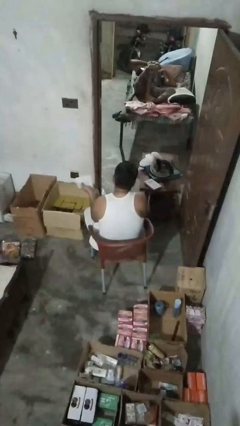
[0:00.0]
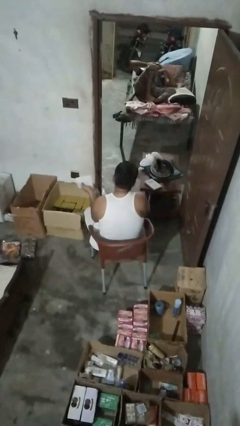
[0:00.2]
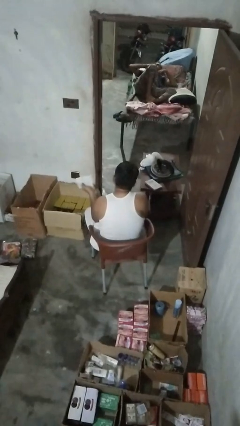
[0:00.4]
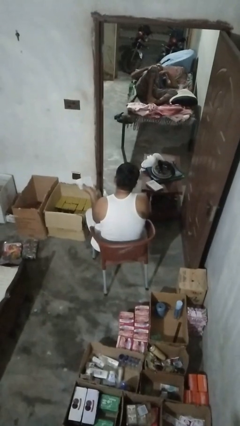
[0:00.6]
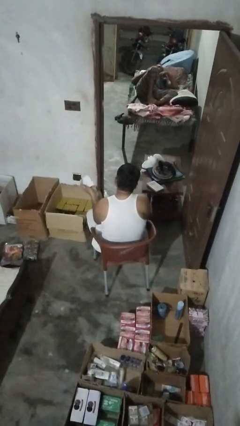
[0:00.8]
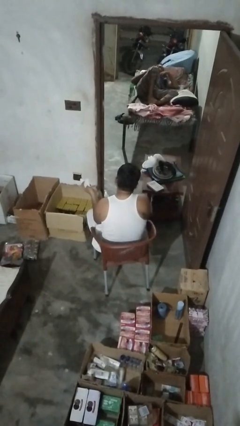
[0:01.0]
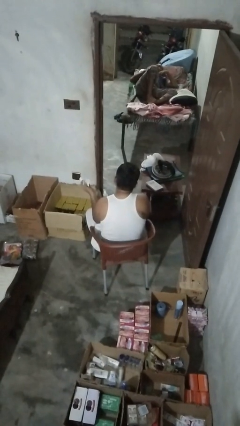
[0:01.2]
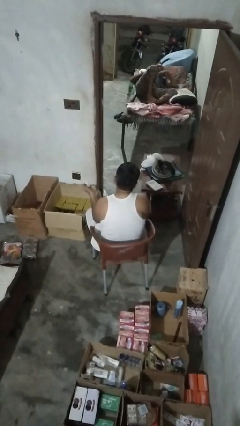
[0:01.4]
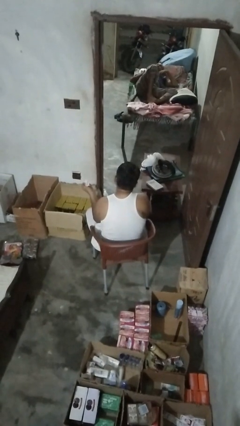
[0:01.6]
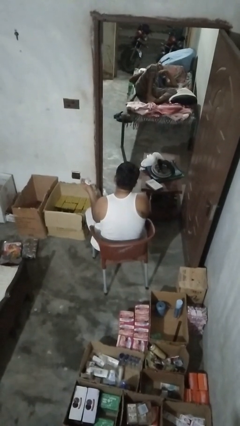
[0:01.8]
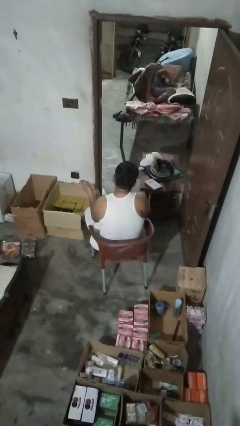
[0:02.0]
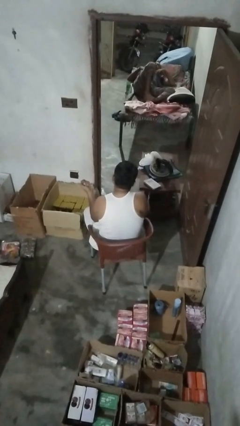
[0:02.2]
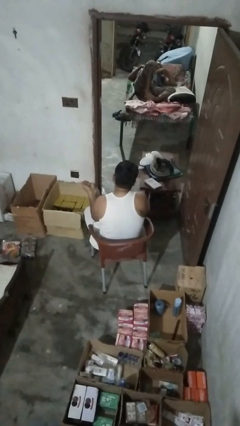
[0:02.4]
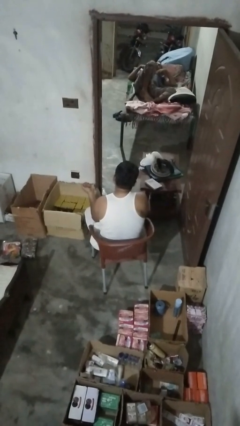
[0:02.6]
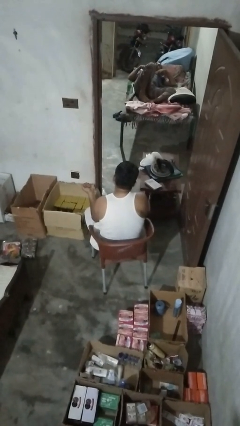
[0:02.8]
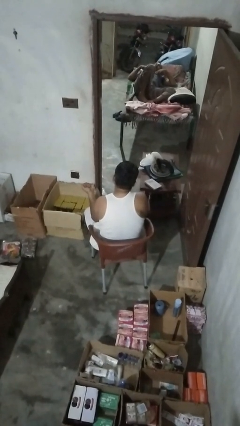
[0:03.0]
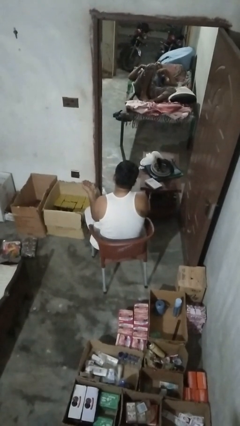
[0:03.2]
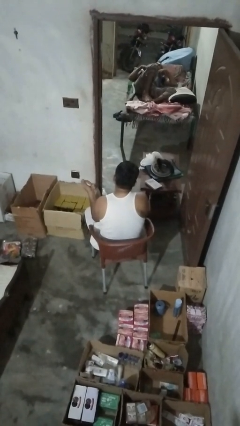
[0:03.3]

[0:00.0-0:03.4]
person crumples paper

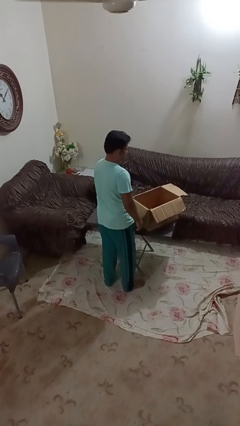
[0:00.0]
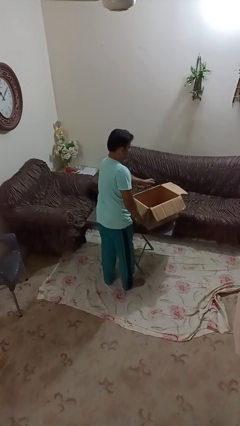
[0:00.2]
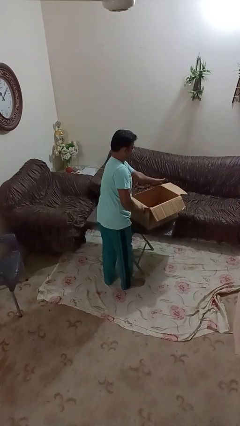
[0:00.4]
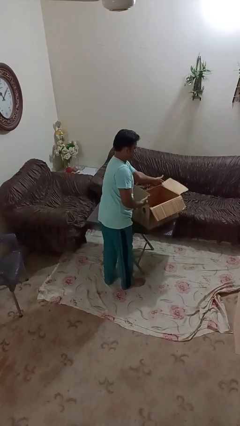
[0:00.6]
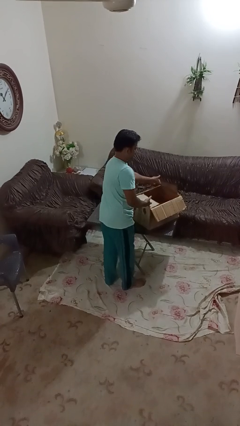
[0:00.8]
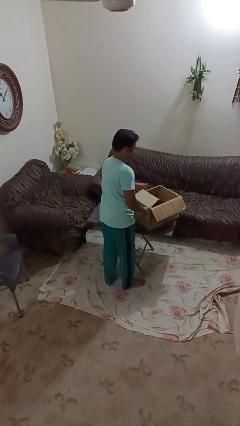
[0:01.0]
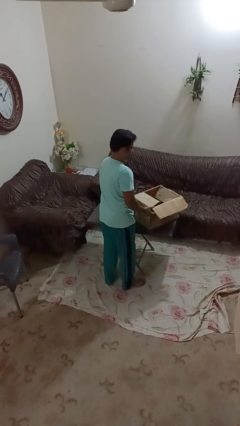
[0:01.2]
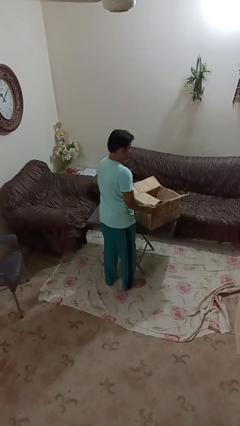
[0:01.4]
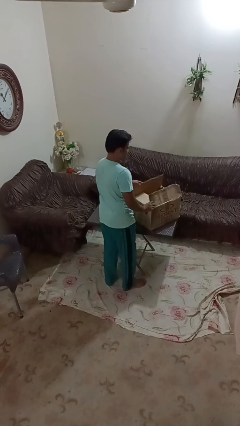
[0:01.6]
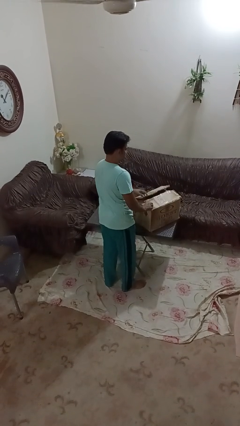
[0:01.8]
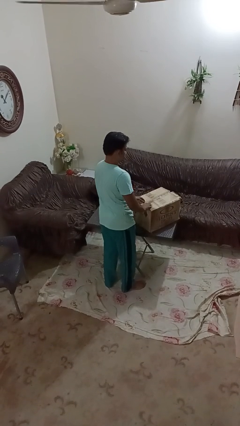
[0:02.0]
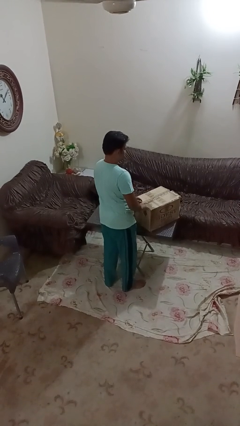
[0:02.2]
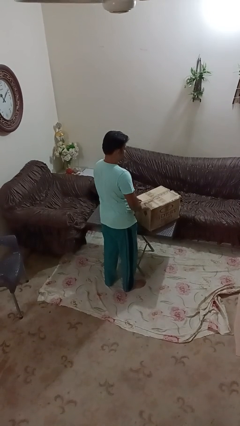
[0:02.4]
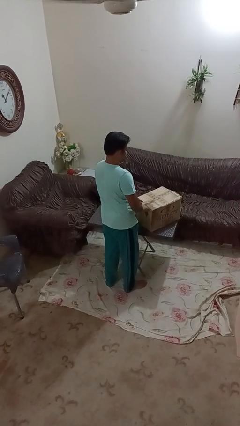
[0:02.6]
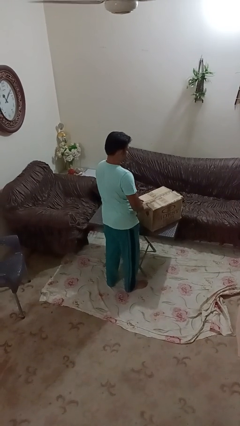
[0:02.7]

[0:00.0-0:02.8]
person closes box

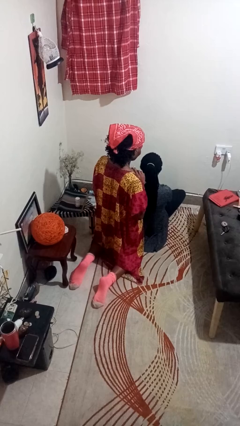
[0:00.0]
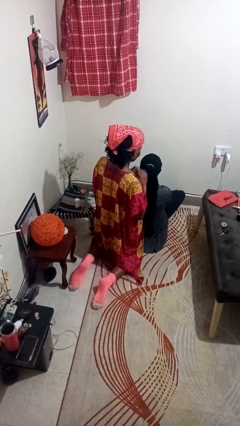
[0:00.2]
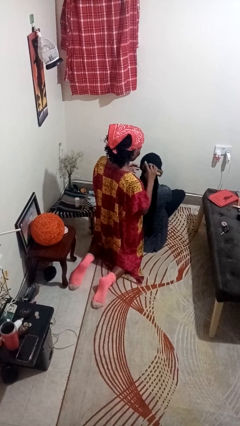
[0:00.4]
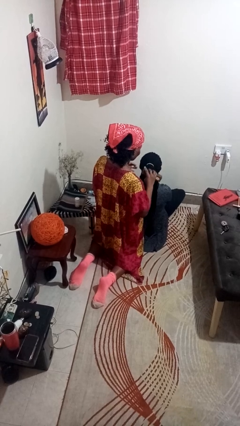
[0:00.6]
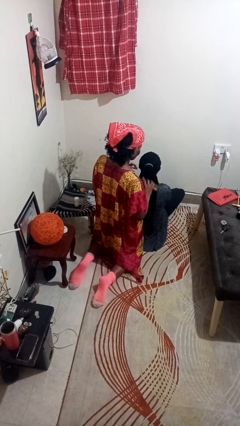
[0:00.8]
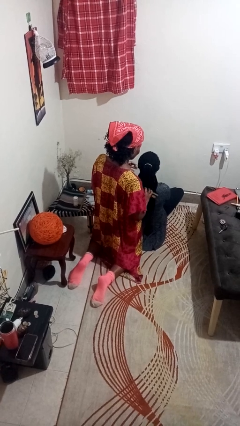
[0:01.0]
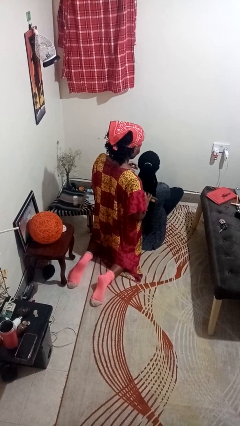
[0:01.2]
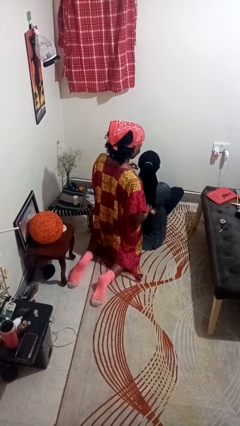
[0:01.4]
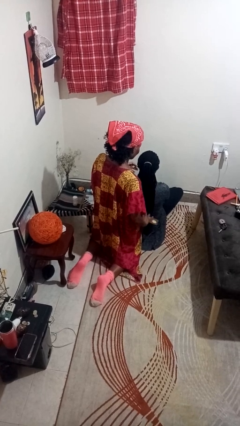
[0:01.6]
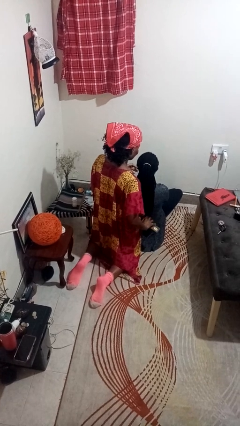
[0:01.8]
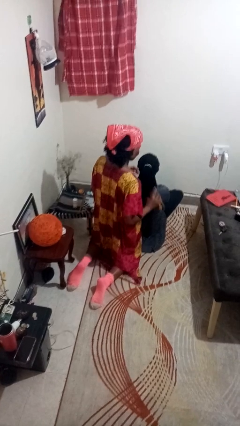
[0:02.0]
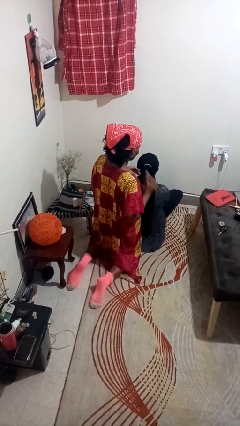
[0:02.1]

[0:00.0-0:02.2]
person brushes hair of person

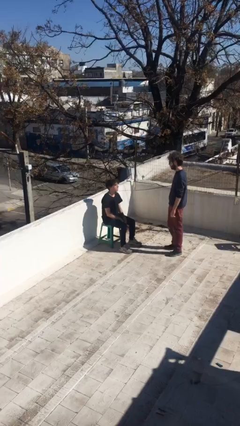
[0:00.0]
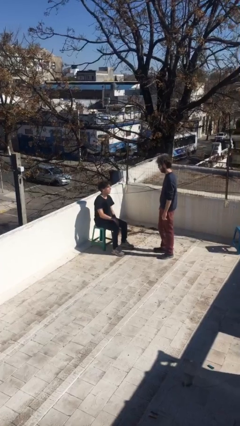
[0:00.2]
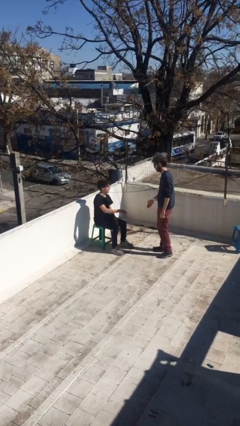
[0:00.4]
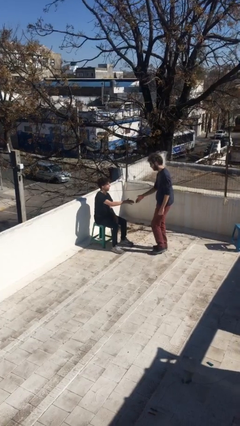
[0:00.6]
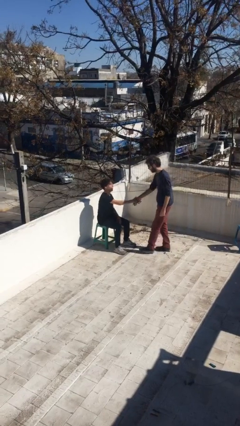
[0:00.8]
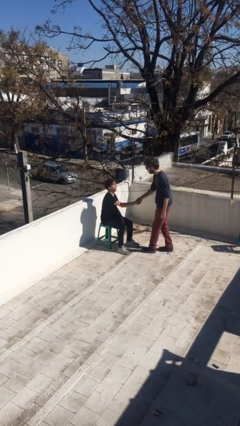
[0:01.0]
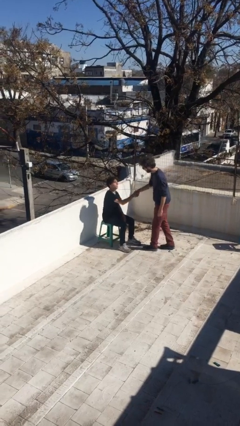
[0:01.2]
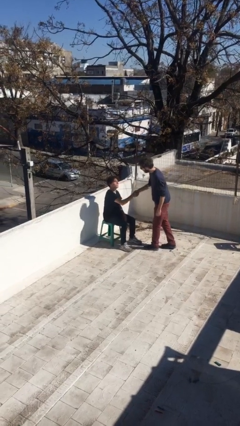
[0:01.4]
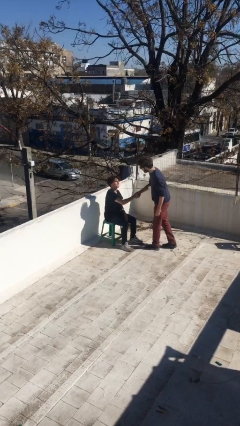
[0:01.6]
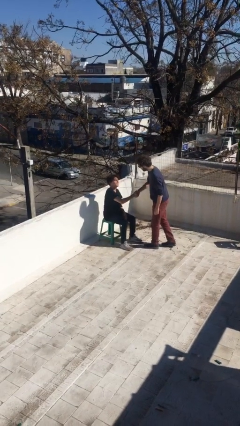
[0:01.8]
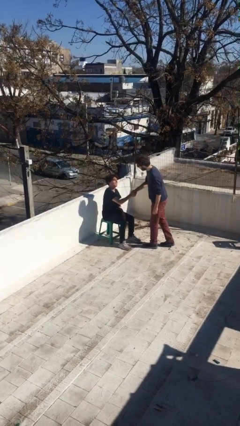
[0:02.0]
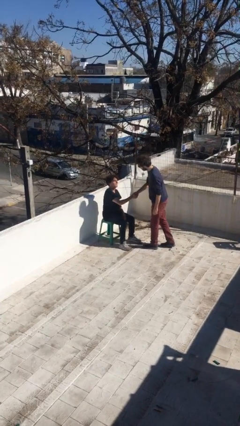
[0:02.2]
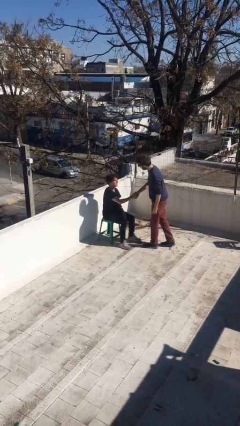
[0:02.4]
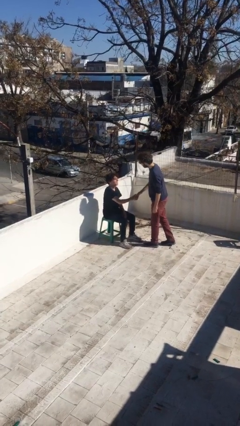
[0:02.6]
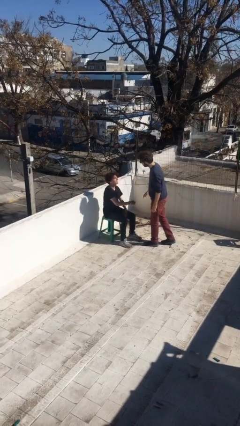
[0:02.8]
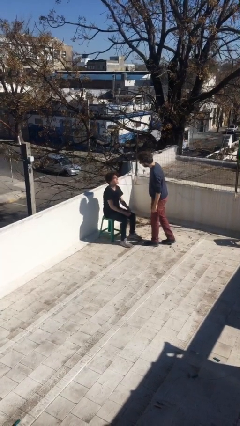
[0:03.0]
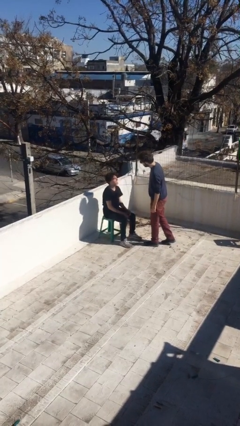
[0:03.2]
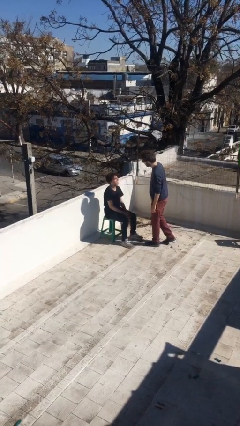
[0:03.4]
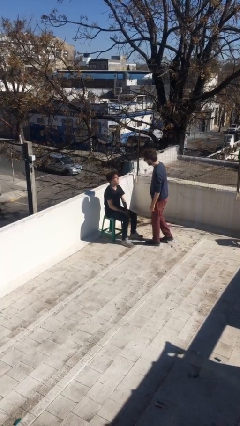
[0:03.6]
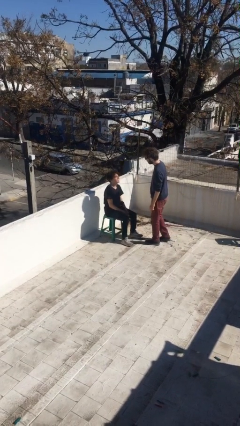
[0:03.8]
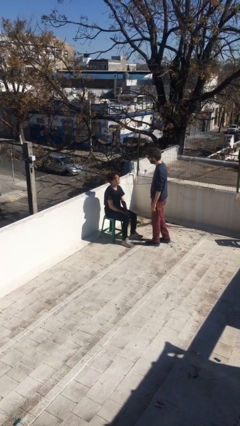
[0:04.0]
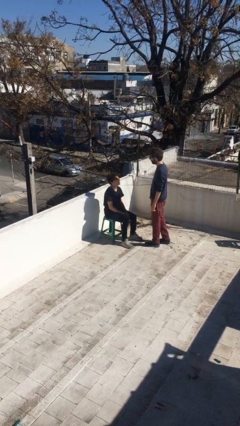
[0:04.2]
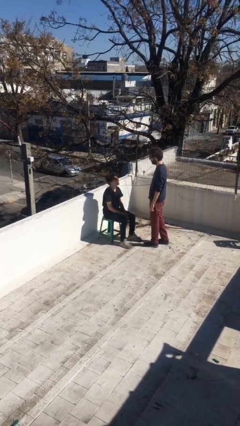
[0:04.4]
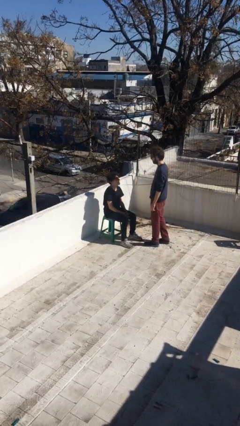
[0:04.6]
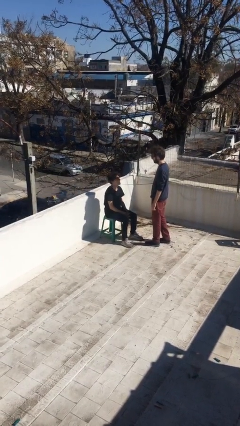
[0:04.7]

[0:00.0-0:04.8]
person shakes hand

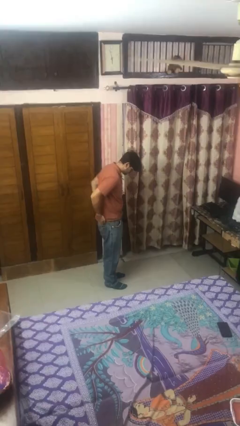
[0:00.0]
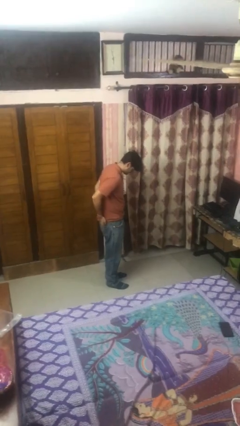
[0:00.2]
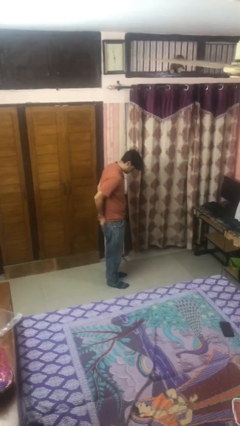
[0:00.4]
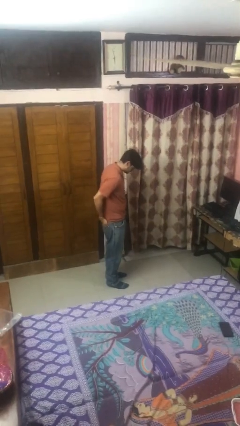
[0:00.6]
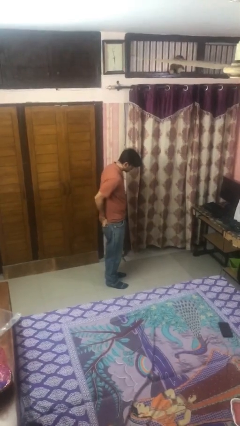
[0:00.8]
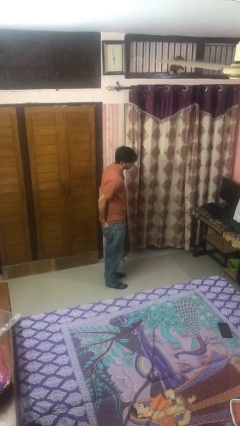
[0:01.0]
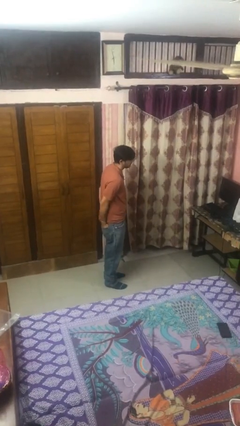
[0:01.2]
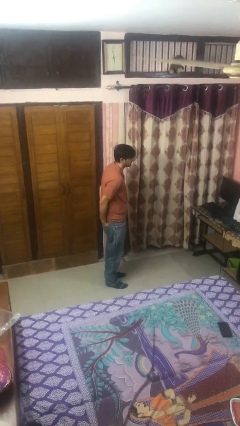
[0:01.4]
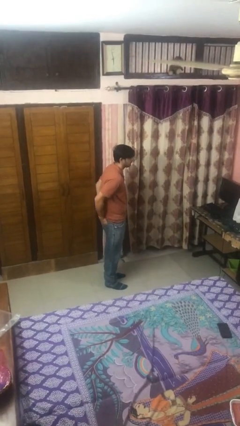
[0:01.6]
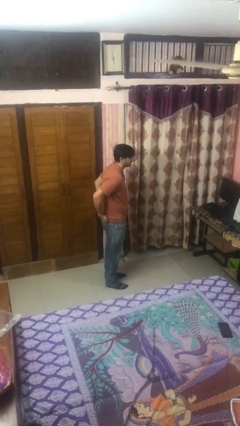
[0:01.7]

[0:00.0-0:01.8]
person puts hands in back pockets

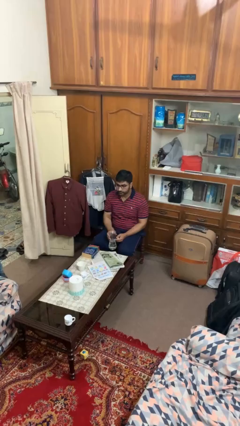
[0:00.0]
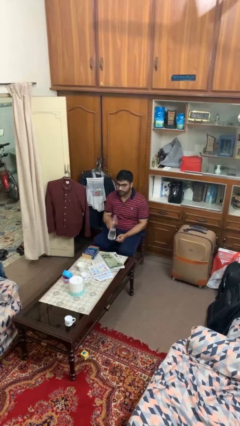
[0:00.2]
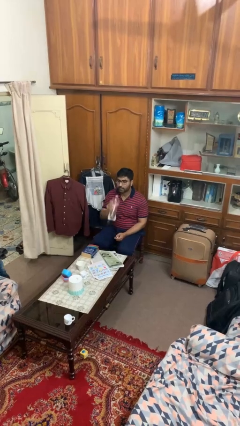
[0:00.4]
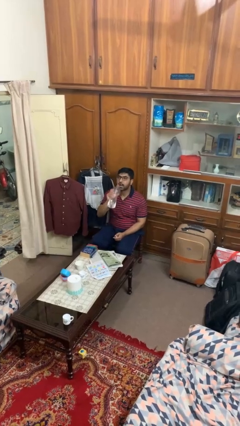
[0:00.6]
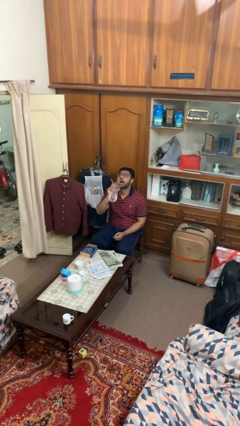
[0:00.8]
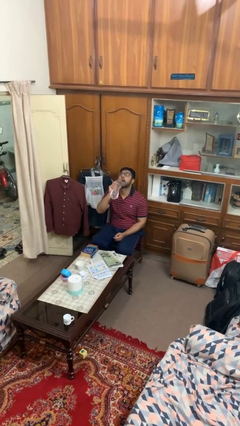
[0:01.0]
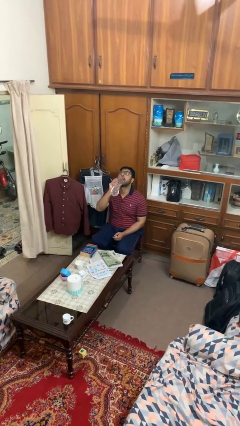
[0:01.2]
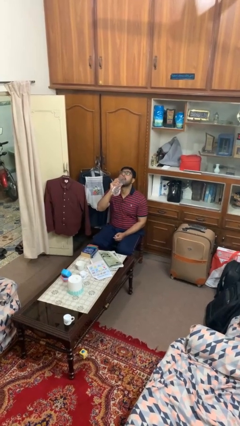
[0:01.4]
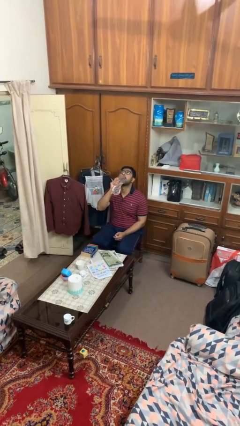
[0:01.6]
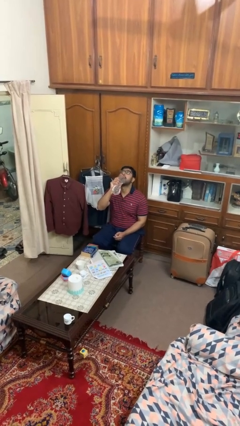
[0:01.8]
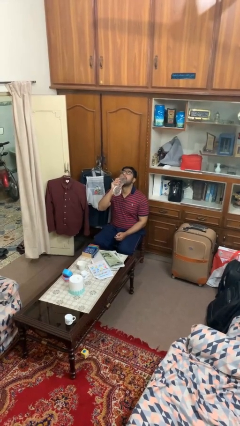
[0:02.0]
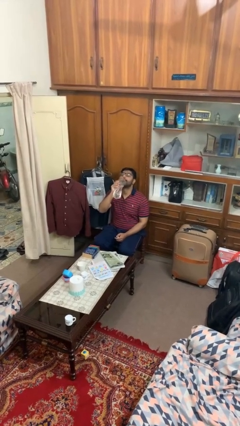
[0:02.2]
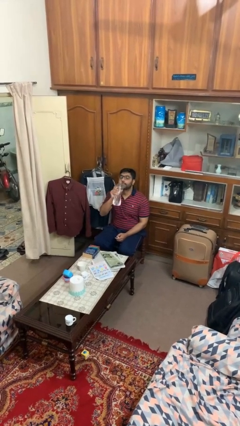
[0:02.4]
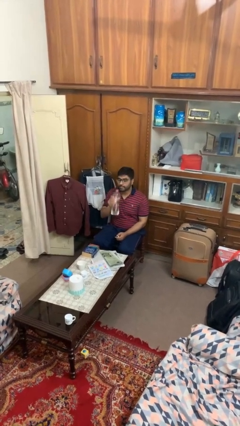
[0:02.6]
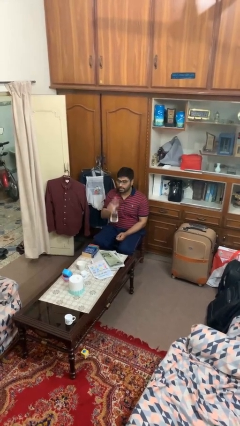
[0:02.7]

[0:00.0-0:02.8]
person drinks from bottle
